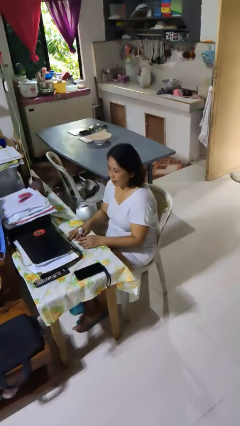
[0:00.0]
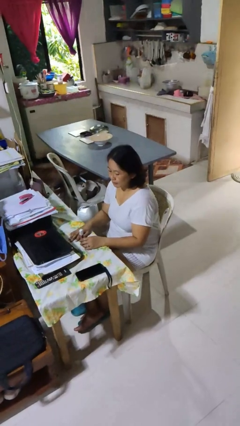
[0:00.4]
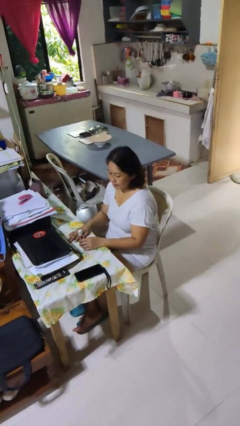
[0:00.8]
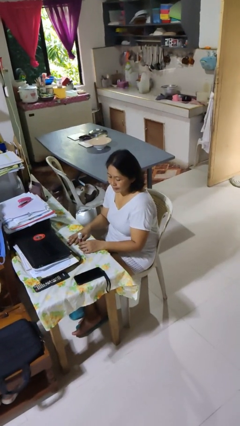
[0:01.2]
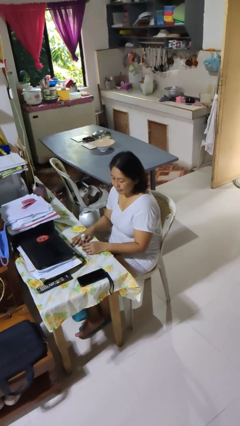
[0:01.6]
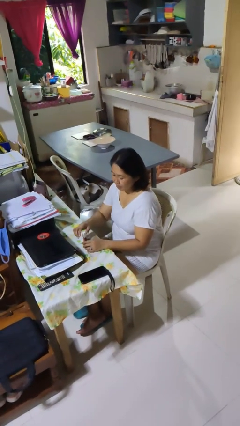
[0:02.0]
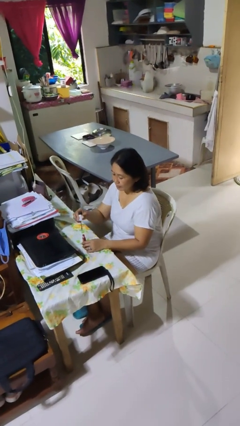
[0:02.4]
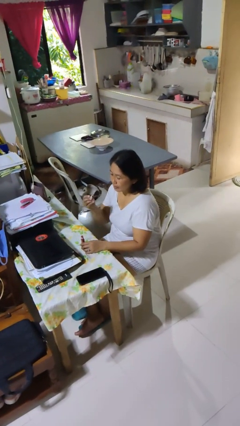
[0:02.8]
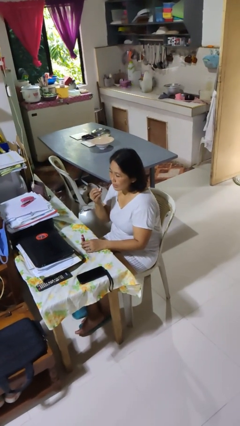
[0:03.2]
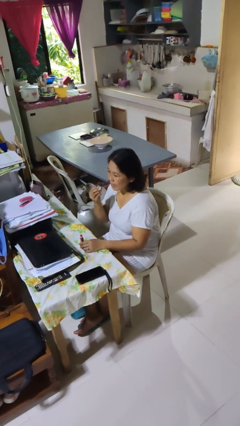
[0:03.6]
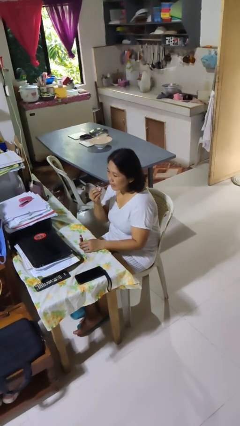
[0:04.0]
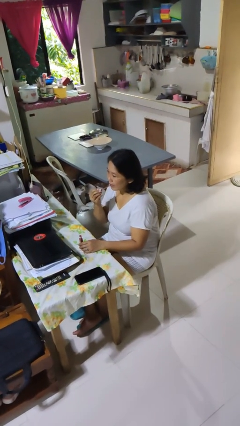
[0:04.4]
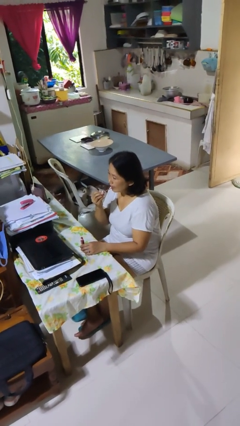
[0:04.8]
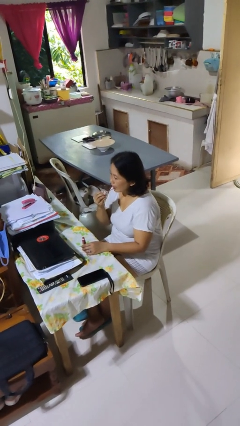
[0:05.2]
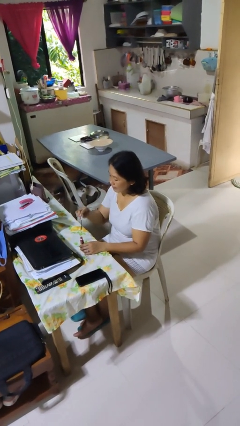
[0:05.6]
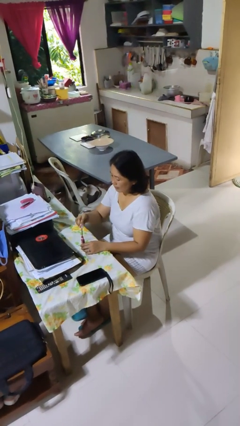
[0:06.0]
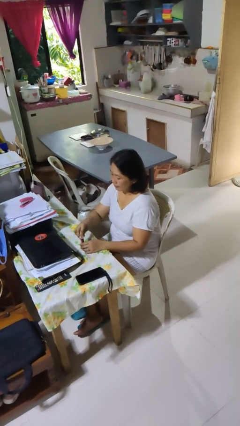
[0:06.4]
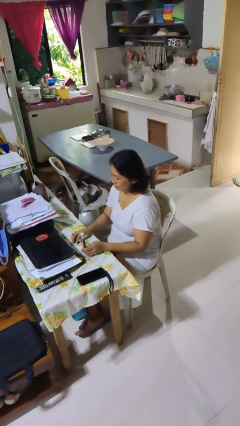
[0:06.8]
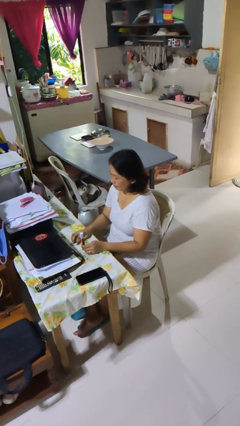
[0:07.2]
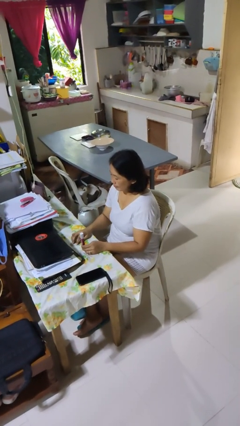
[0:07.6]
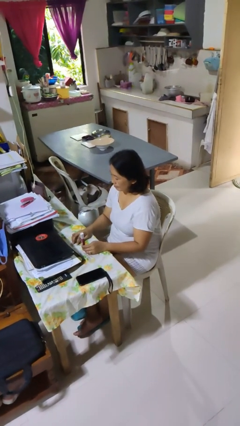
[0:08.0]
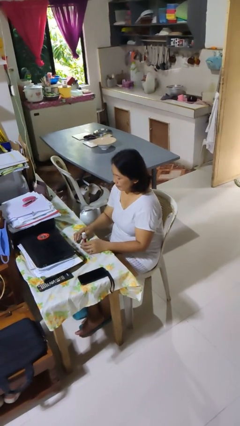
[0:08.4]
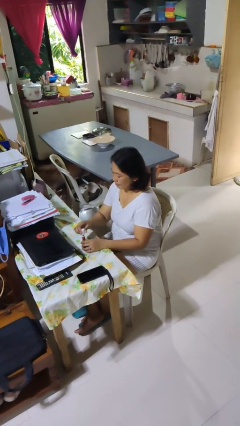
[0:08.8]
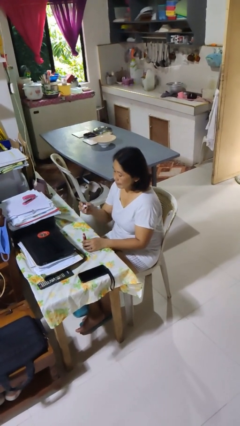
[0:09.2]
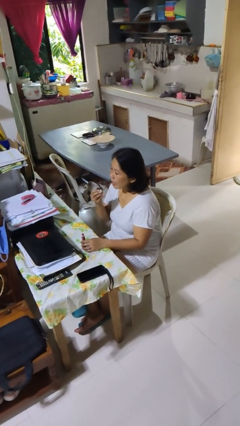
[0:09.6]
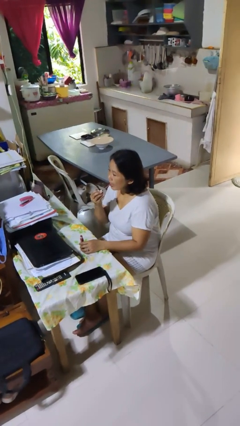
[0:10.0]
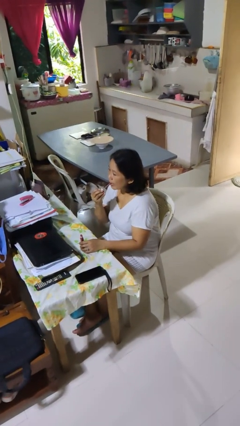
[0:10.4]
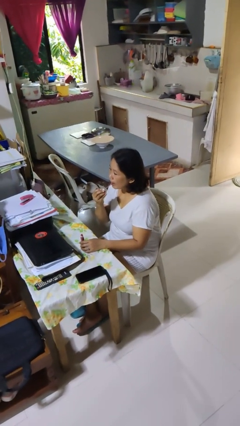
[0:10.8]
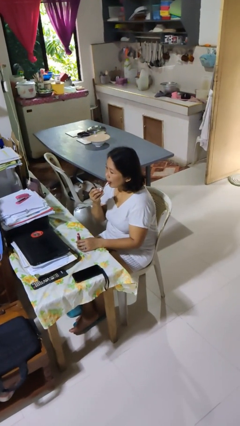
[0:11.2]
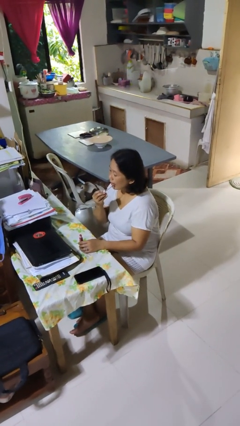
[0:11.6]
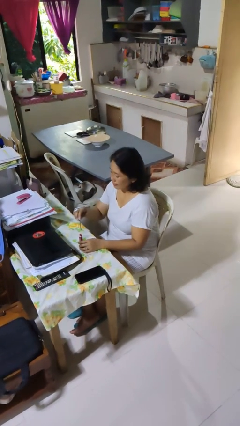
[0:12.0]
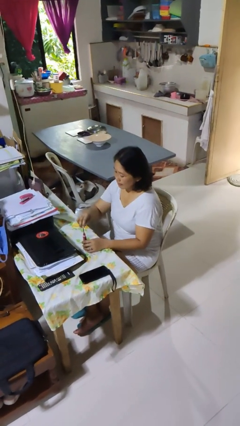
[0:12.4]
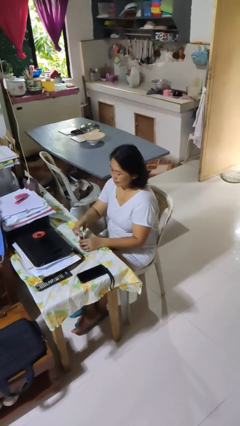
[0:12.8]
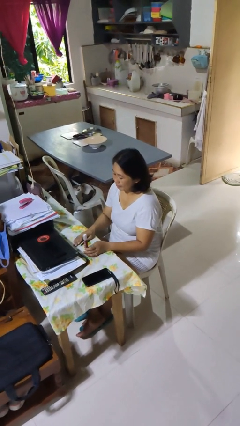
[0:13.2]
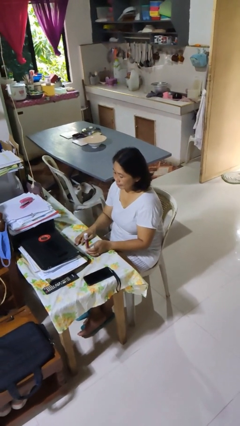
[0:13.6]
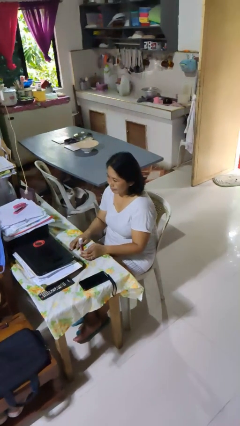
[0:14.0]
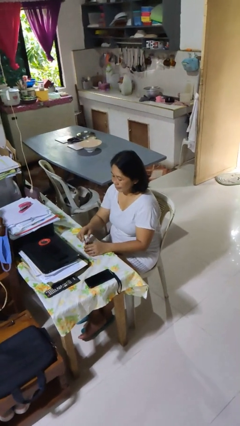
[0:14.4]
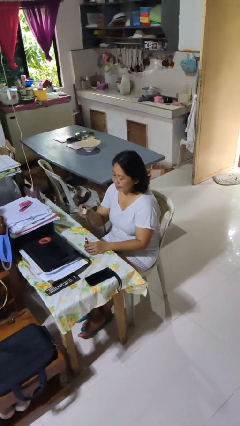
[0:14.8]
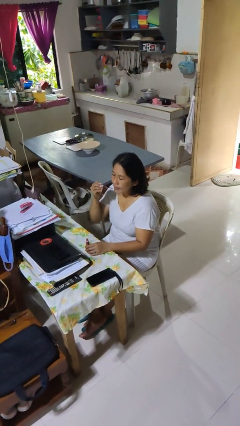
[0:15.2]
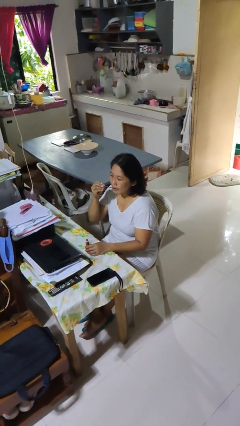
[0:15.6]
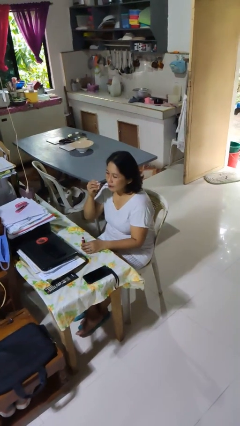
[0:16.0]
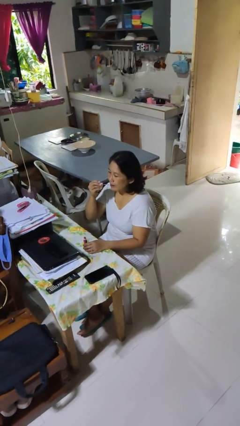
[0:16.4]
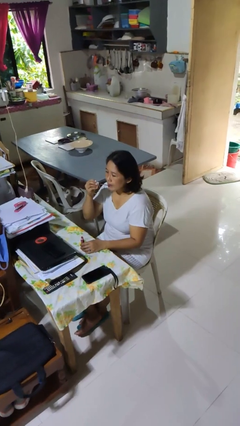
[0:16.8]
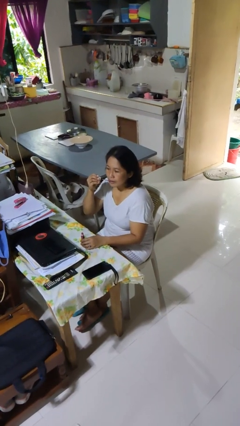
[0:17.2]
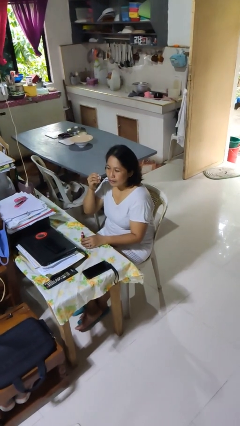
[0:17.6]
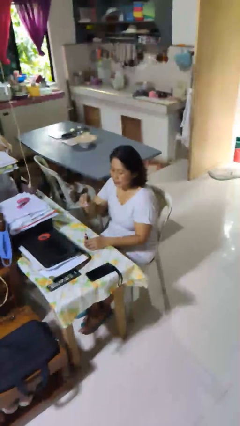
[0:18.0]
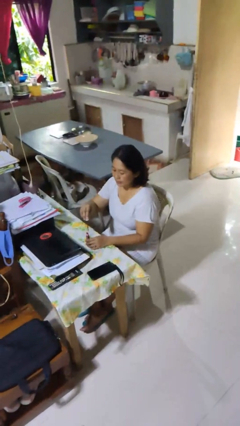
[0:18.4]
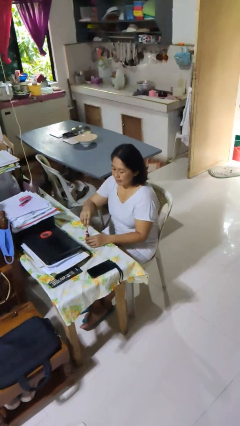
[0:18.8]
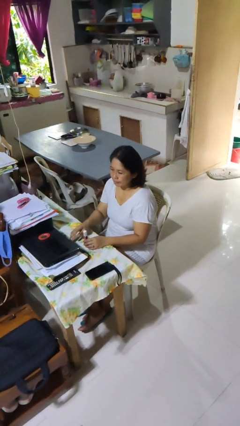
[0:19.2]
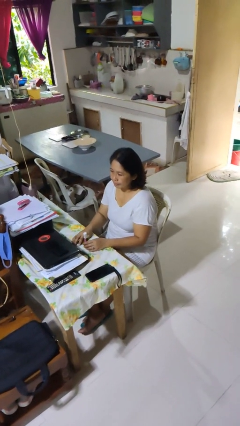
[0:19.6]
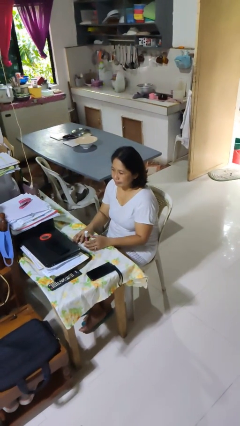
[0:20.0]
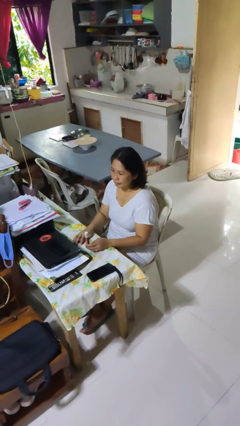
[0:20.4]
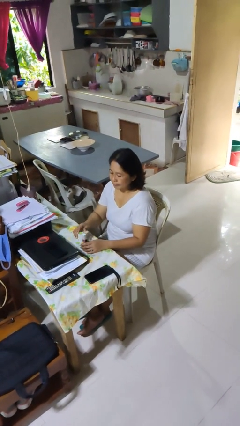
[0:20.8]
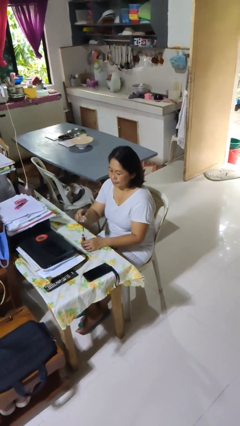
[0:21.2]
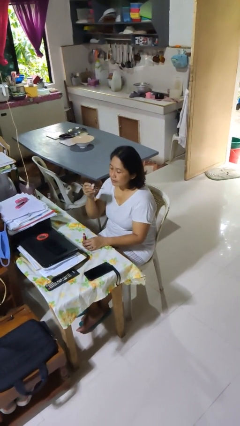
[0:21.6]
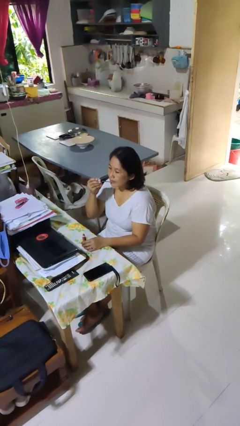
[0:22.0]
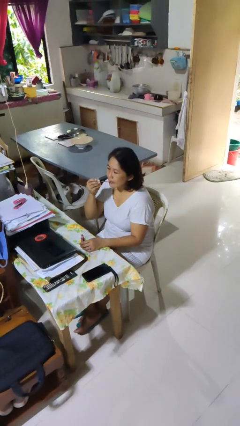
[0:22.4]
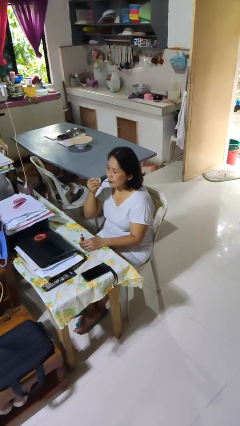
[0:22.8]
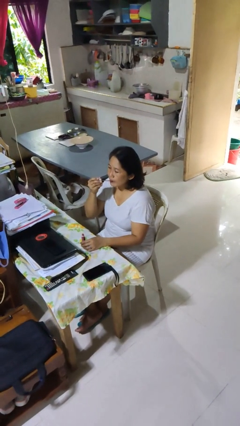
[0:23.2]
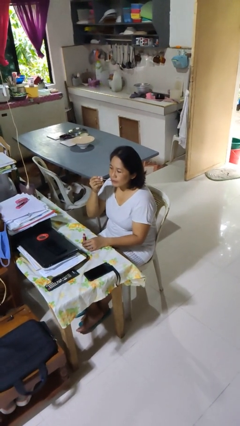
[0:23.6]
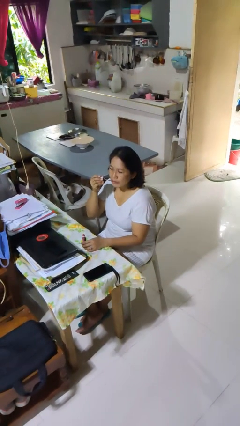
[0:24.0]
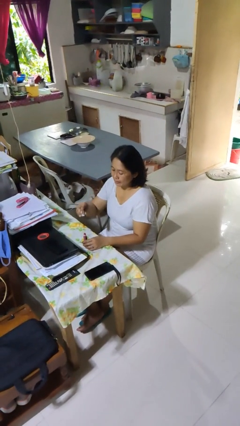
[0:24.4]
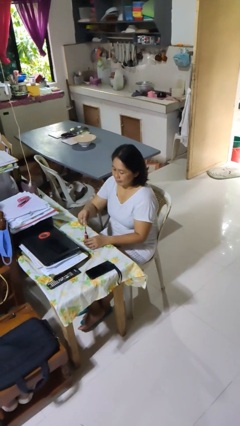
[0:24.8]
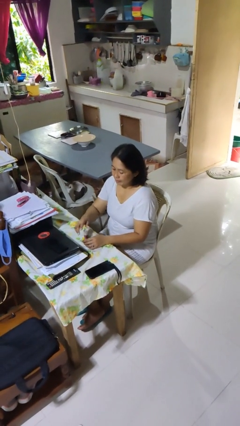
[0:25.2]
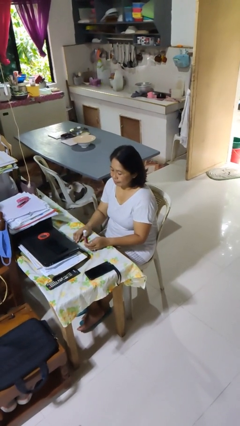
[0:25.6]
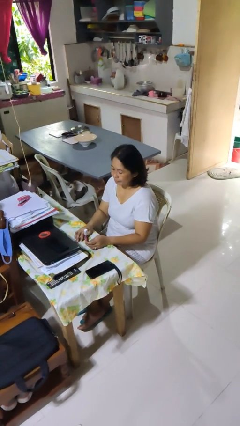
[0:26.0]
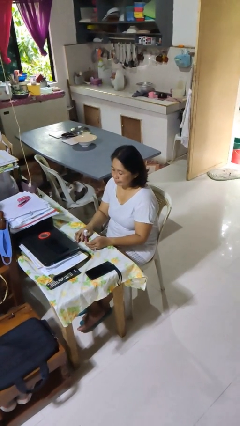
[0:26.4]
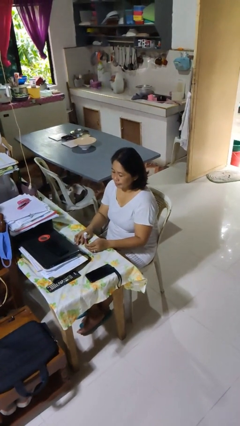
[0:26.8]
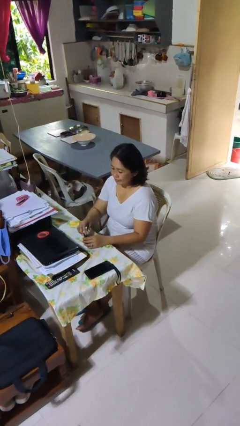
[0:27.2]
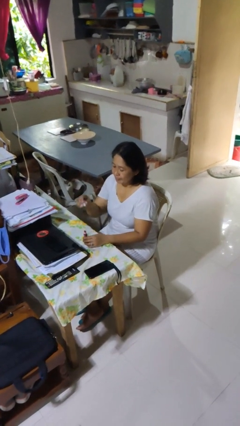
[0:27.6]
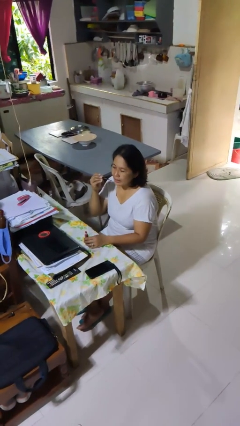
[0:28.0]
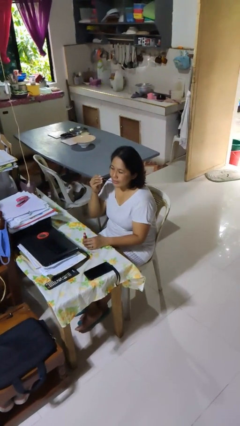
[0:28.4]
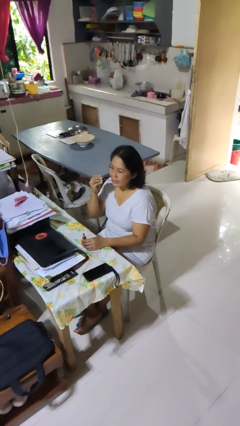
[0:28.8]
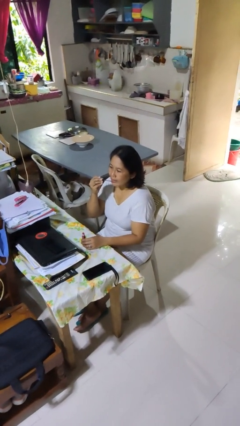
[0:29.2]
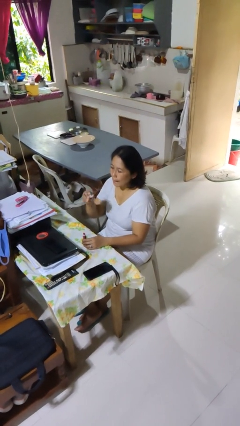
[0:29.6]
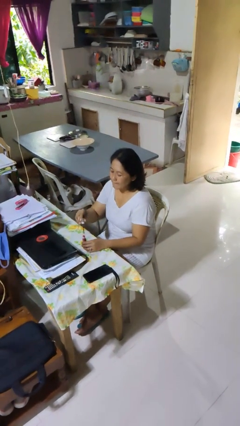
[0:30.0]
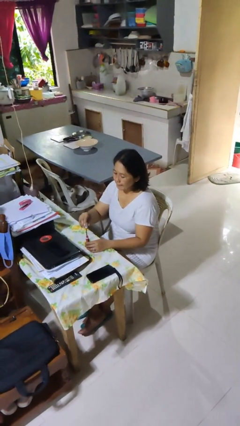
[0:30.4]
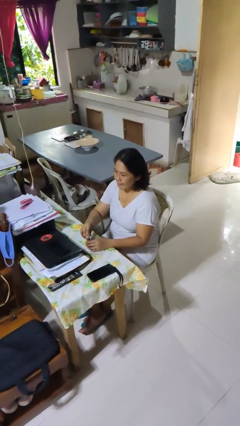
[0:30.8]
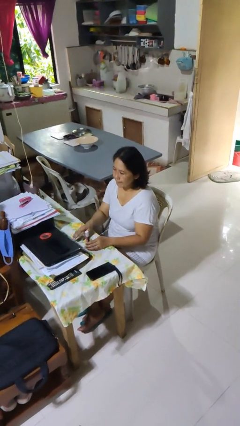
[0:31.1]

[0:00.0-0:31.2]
person applies lip makeup

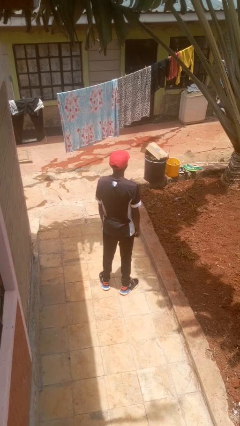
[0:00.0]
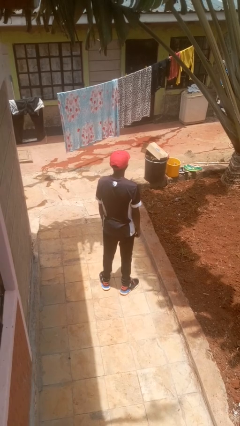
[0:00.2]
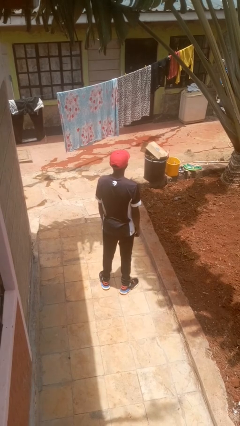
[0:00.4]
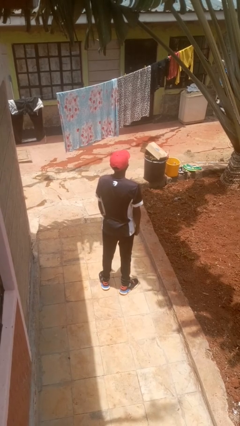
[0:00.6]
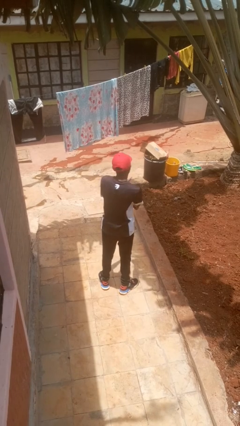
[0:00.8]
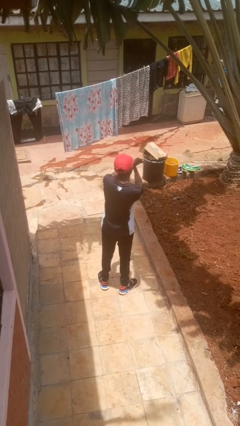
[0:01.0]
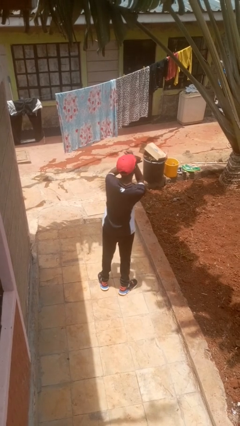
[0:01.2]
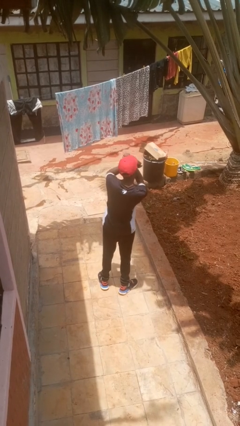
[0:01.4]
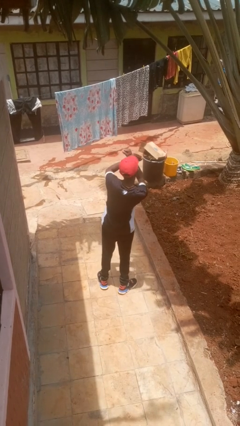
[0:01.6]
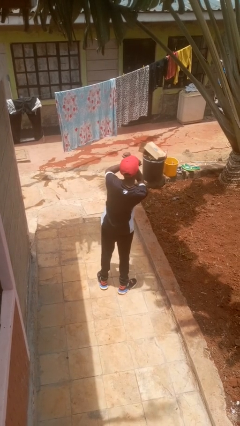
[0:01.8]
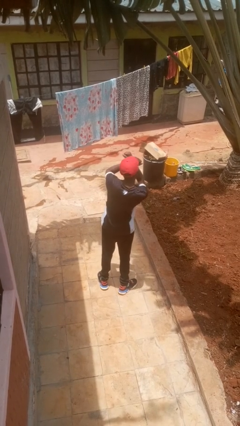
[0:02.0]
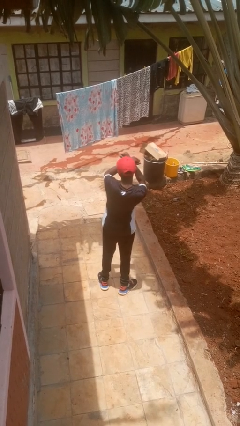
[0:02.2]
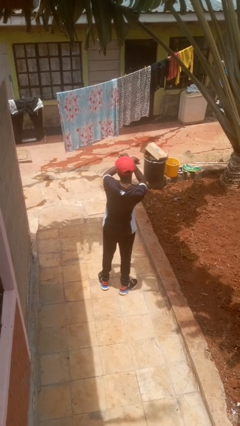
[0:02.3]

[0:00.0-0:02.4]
person gestures arms x

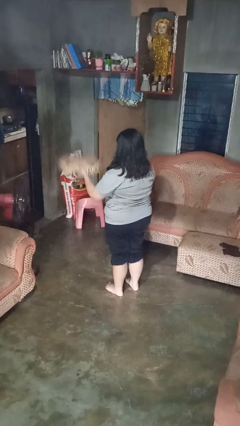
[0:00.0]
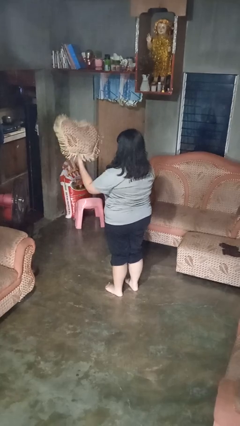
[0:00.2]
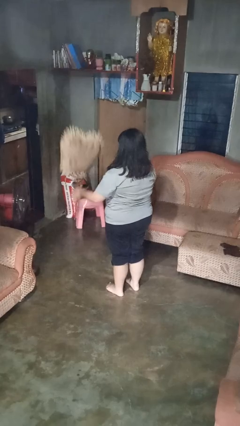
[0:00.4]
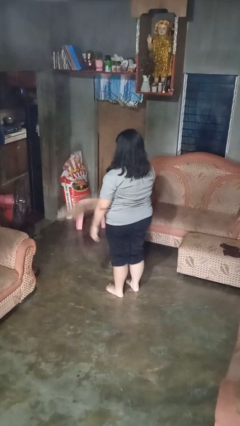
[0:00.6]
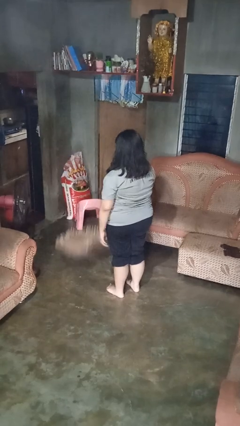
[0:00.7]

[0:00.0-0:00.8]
person throws object into air
